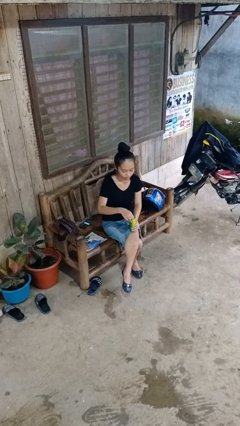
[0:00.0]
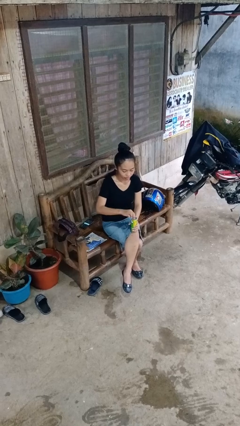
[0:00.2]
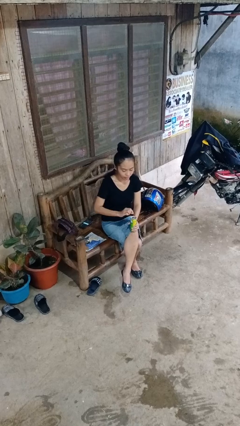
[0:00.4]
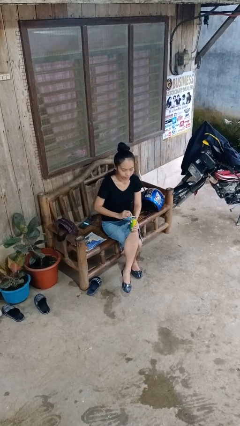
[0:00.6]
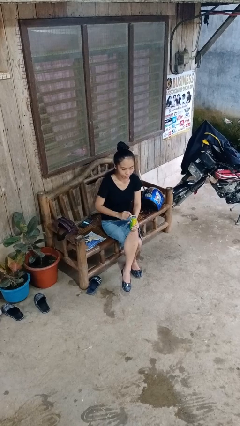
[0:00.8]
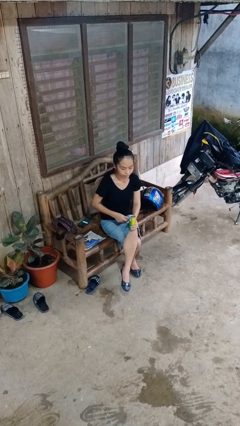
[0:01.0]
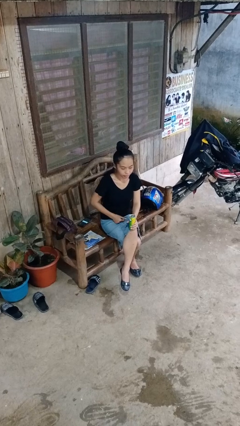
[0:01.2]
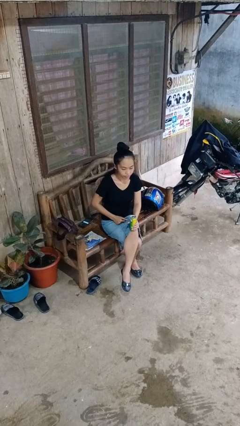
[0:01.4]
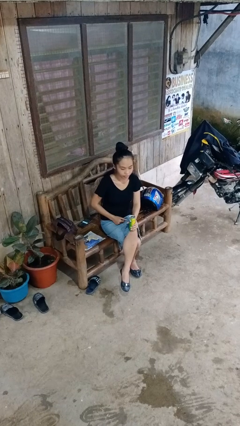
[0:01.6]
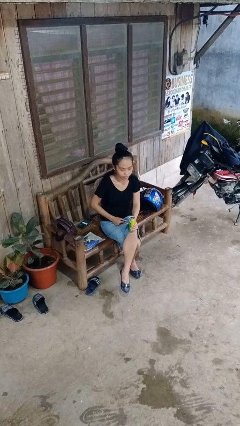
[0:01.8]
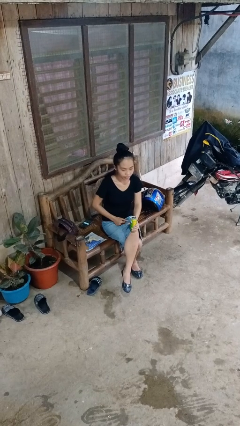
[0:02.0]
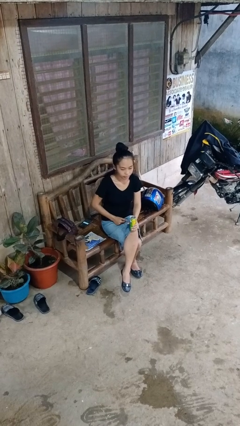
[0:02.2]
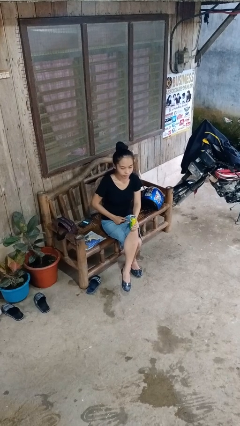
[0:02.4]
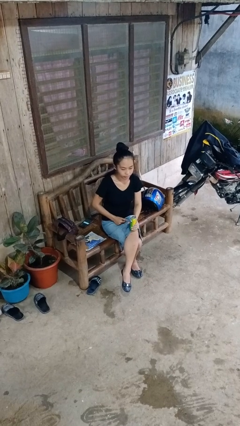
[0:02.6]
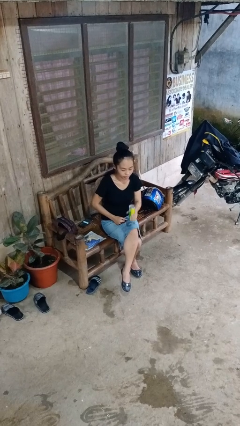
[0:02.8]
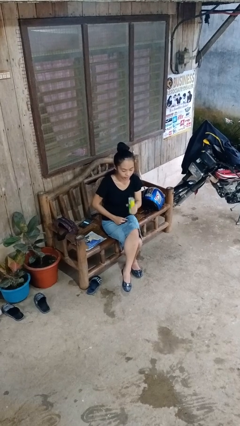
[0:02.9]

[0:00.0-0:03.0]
person opens beverage can

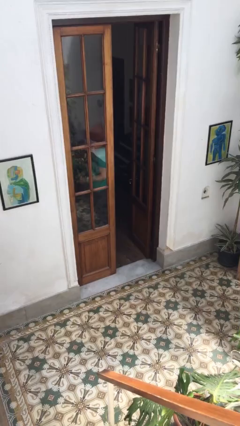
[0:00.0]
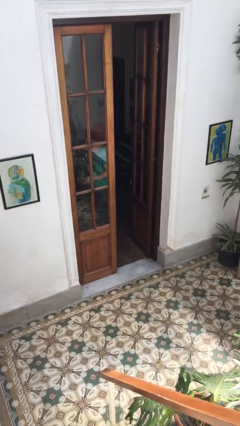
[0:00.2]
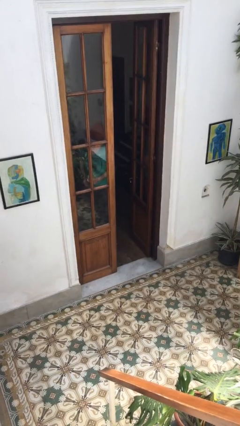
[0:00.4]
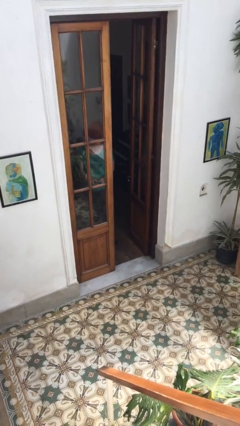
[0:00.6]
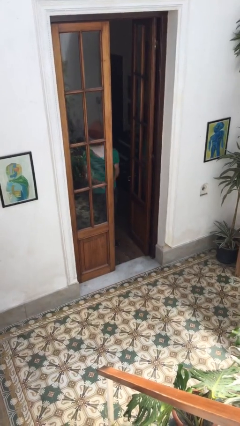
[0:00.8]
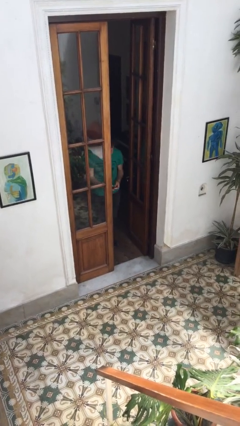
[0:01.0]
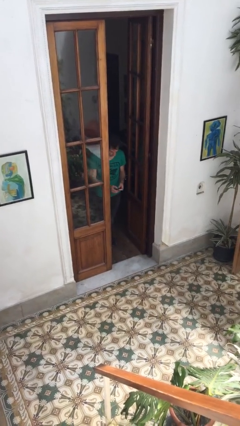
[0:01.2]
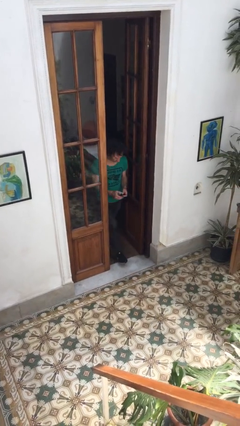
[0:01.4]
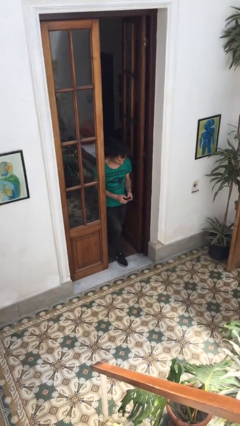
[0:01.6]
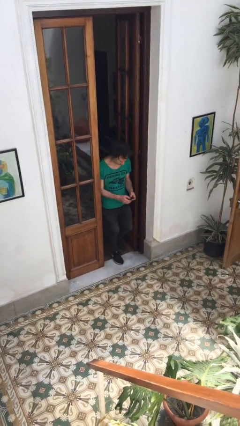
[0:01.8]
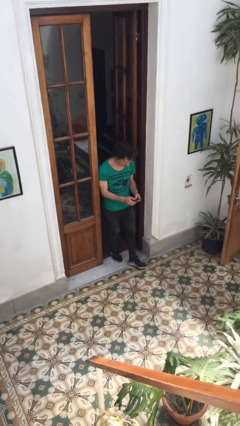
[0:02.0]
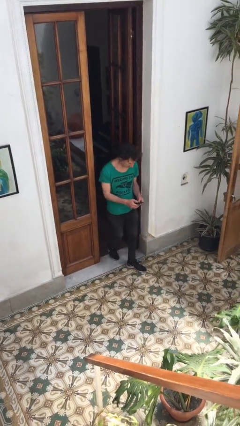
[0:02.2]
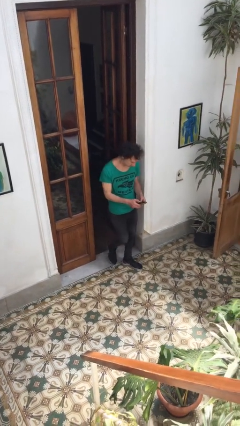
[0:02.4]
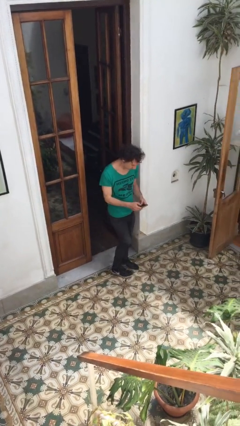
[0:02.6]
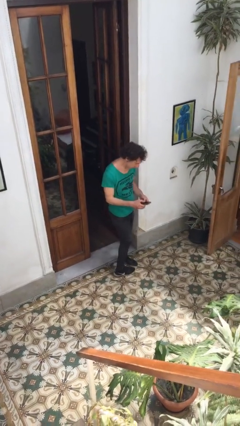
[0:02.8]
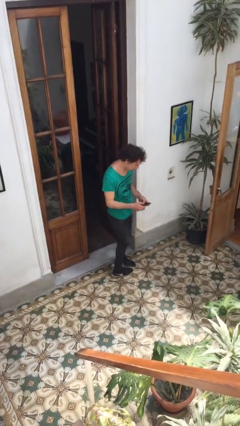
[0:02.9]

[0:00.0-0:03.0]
person enters scene through structure

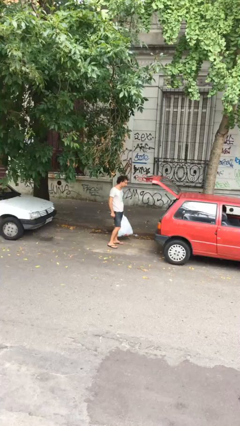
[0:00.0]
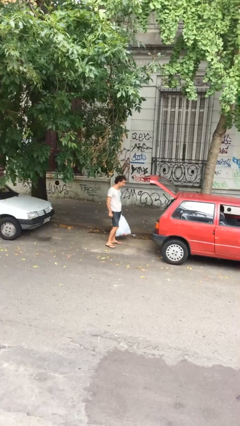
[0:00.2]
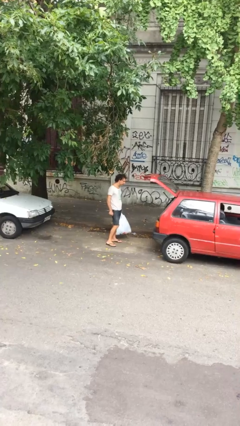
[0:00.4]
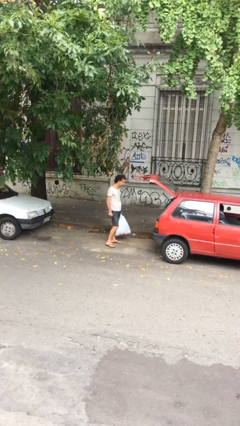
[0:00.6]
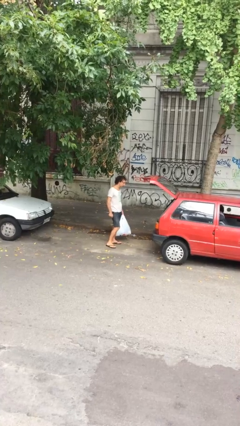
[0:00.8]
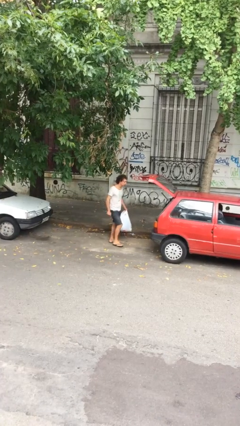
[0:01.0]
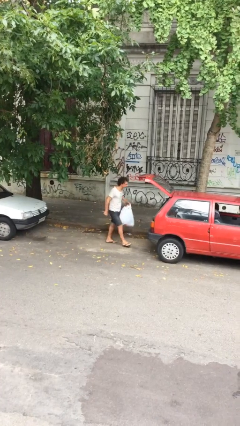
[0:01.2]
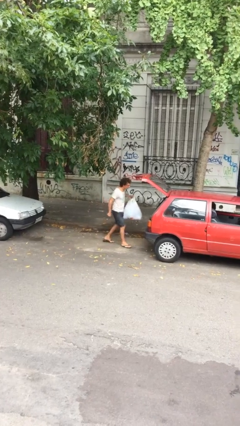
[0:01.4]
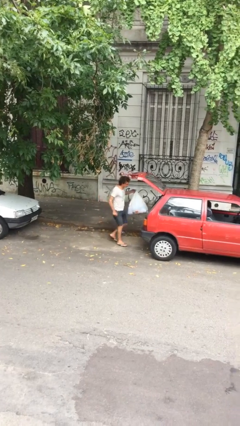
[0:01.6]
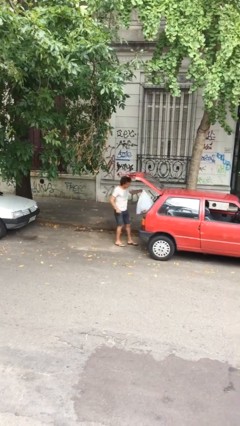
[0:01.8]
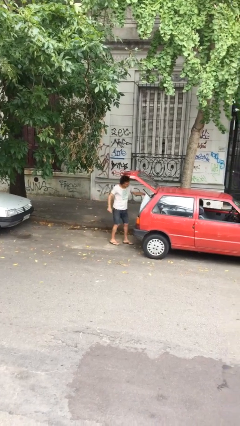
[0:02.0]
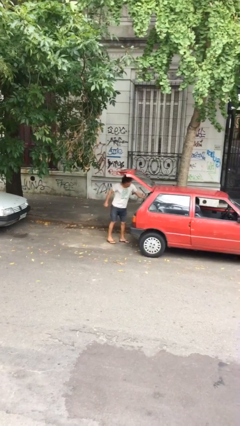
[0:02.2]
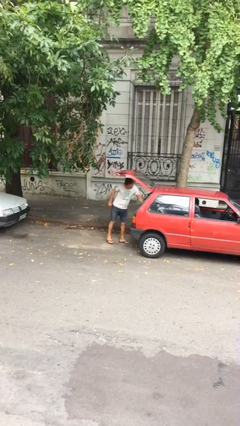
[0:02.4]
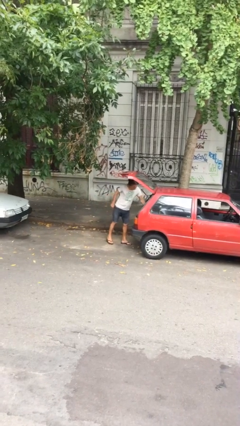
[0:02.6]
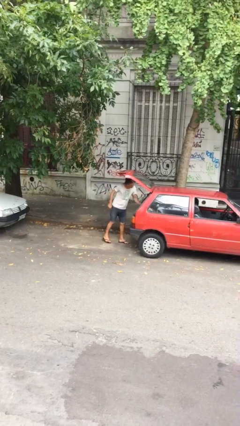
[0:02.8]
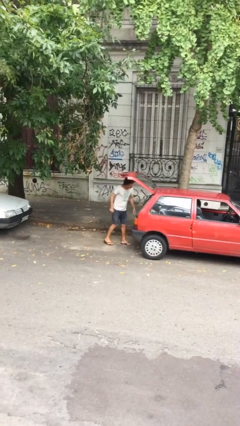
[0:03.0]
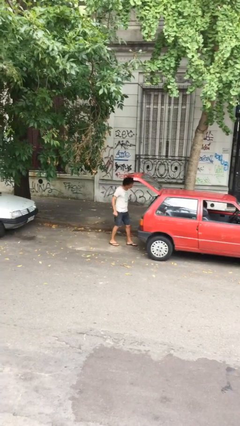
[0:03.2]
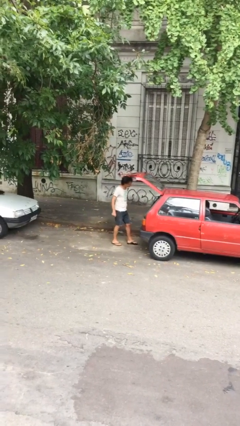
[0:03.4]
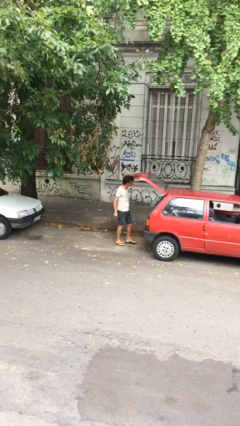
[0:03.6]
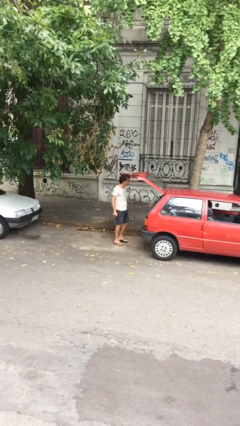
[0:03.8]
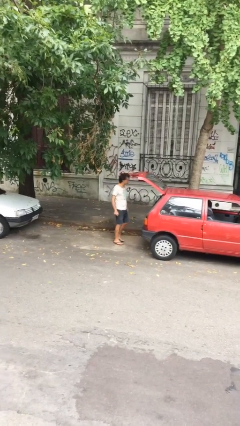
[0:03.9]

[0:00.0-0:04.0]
person loads car

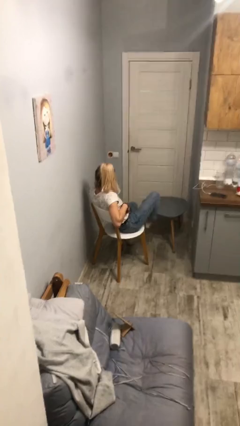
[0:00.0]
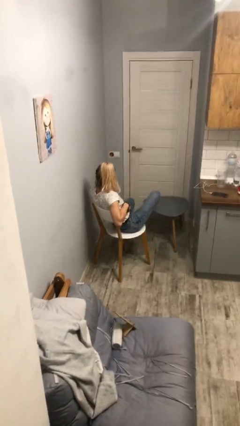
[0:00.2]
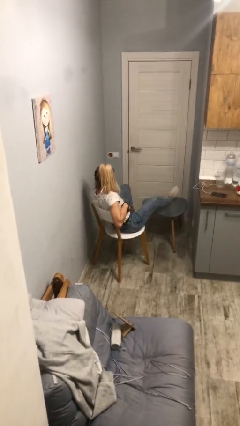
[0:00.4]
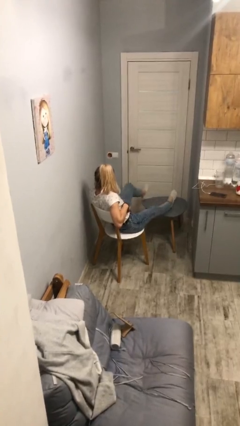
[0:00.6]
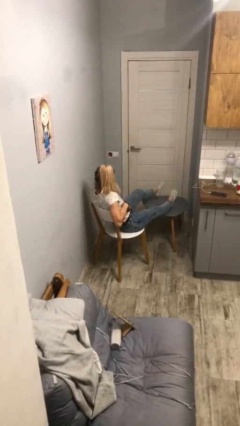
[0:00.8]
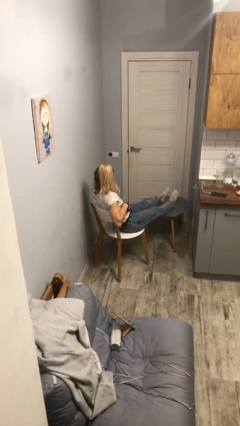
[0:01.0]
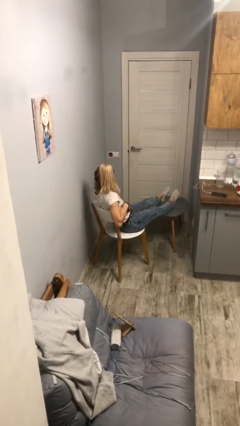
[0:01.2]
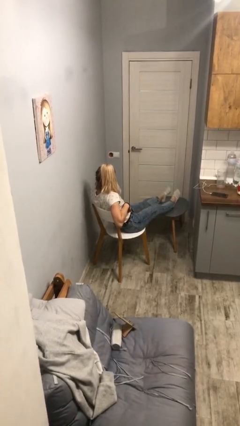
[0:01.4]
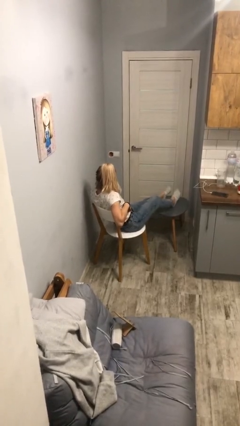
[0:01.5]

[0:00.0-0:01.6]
person puts feet up

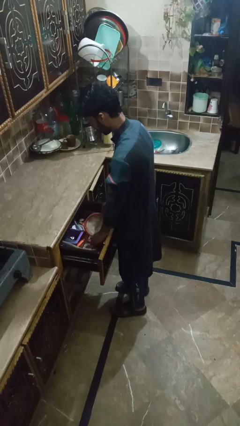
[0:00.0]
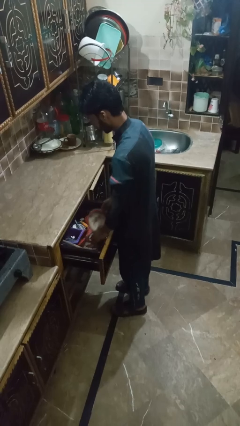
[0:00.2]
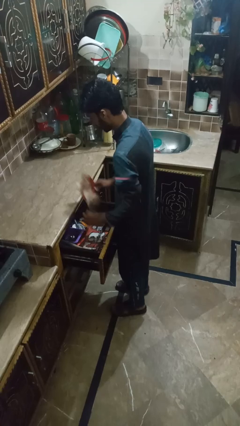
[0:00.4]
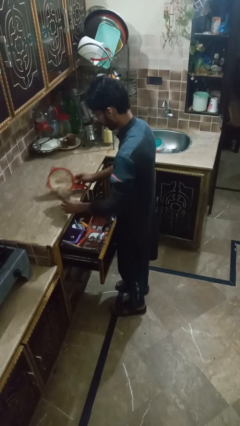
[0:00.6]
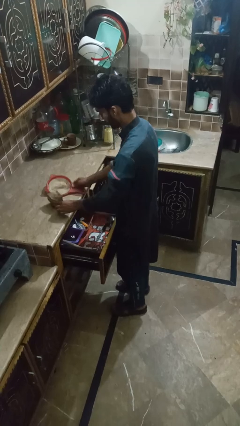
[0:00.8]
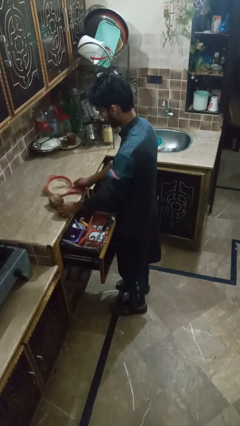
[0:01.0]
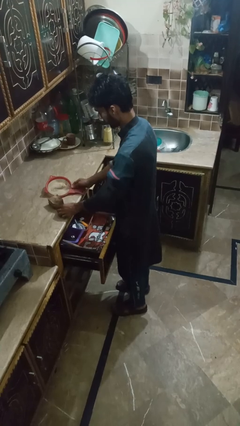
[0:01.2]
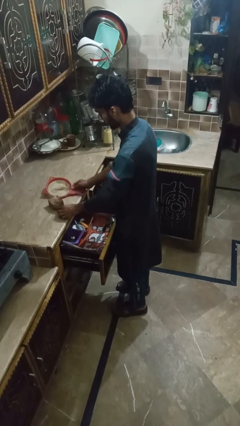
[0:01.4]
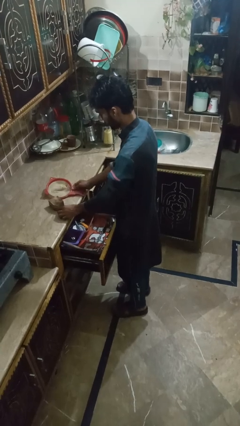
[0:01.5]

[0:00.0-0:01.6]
person puts object into kitchen drawer

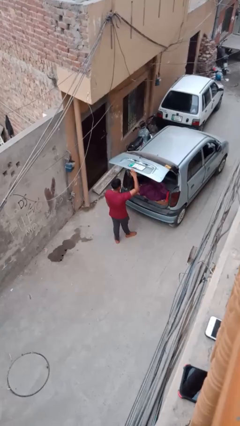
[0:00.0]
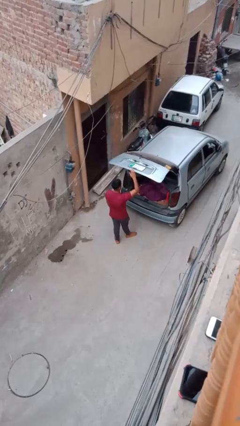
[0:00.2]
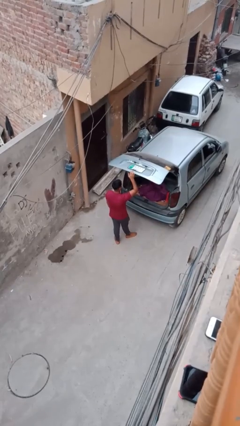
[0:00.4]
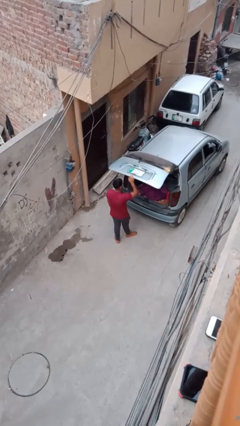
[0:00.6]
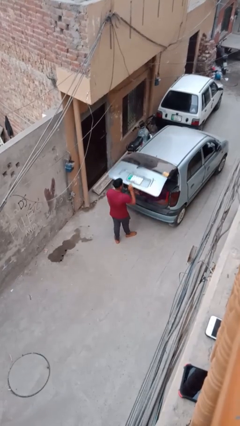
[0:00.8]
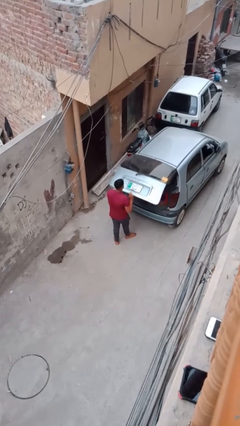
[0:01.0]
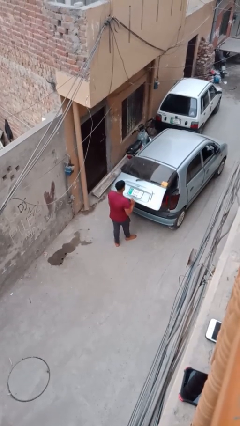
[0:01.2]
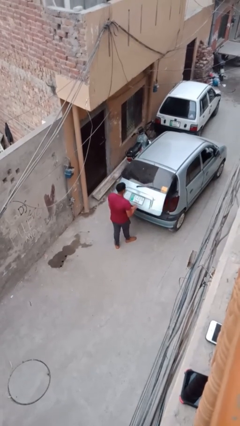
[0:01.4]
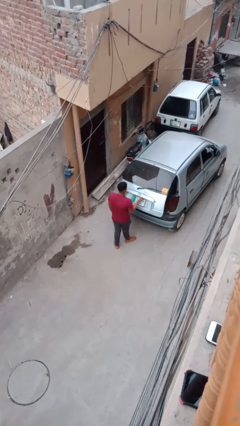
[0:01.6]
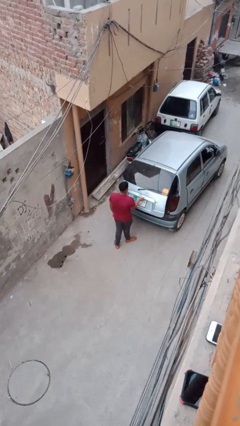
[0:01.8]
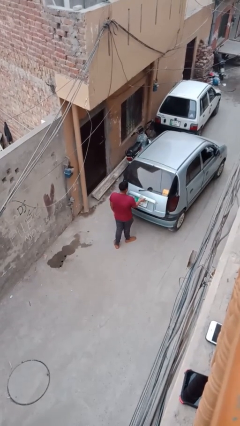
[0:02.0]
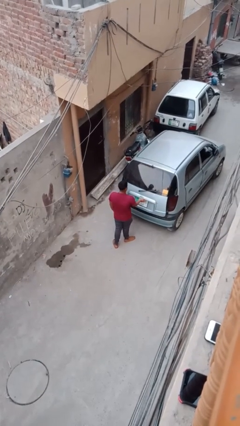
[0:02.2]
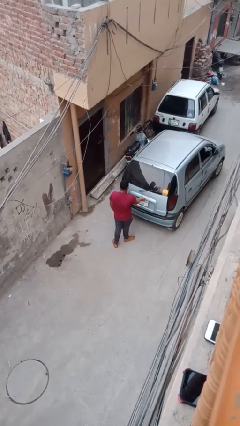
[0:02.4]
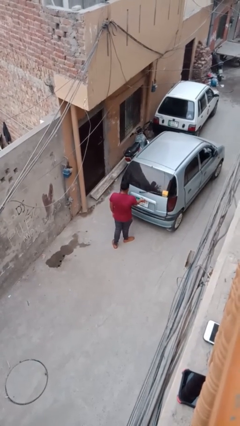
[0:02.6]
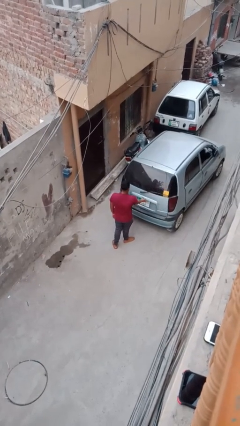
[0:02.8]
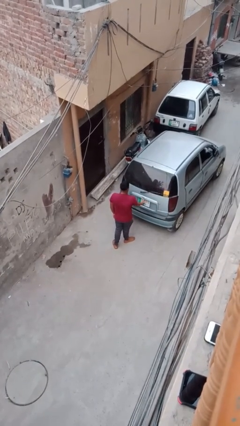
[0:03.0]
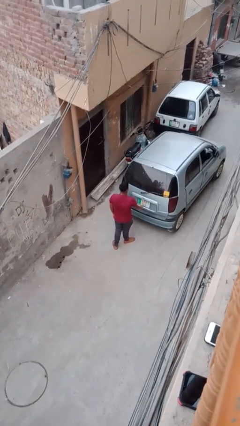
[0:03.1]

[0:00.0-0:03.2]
person closes car trunk

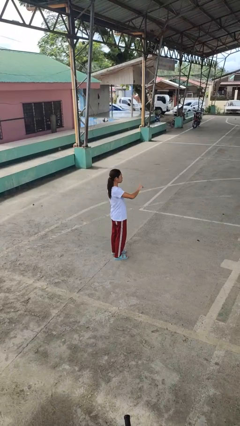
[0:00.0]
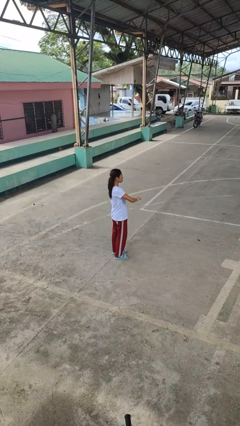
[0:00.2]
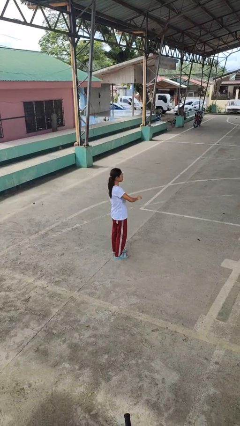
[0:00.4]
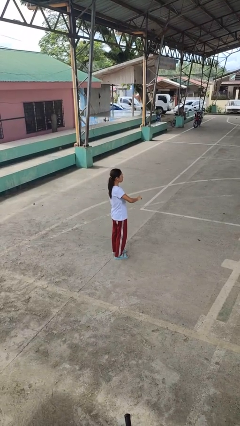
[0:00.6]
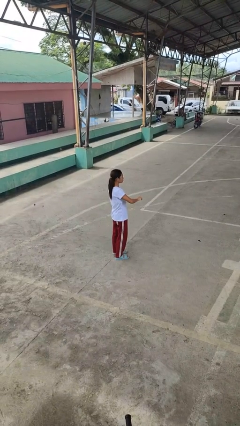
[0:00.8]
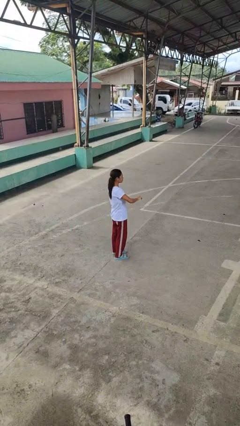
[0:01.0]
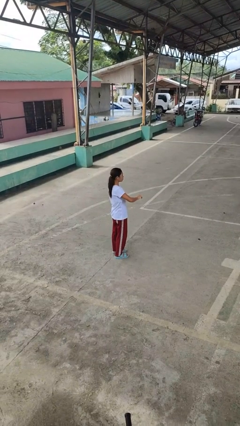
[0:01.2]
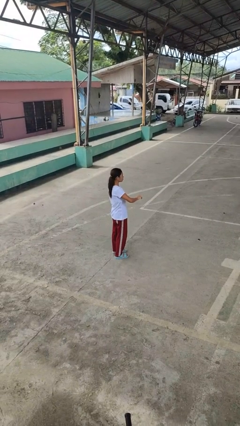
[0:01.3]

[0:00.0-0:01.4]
person gestures swipe down
